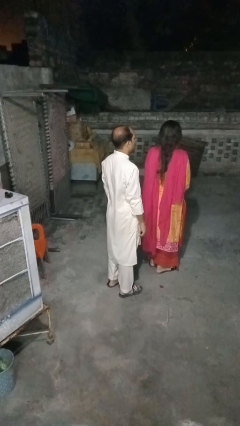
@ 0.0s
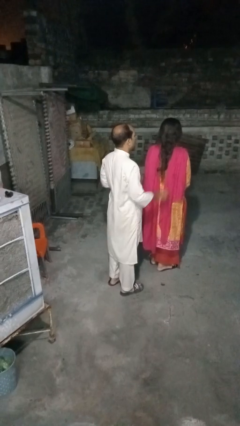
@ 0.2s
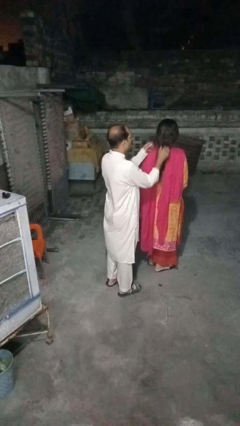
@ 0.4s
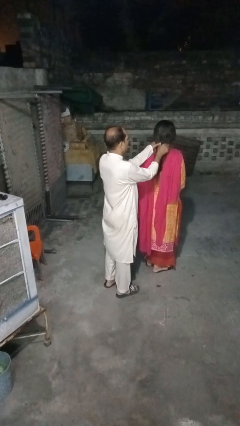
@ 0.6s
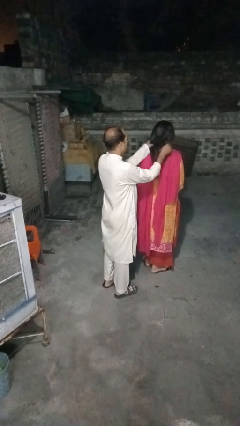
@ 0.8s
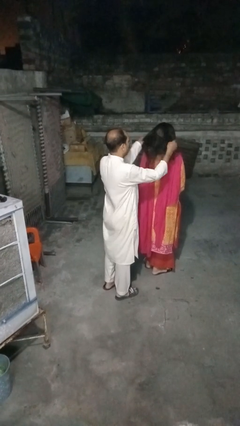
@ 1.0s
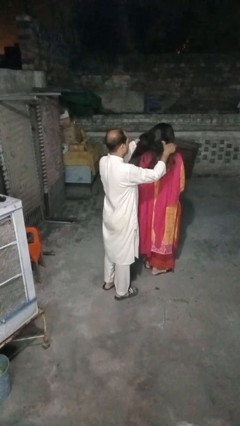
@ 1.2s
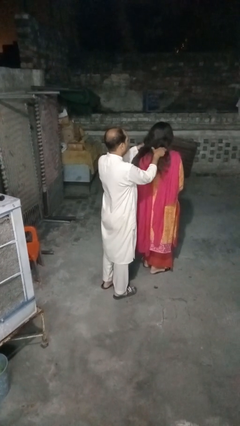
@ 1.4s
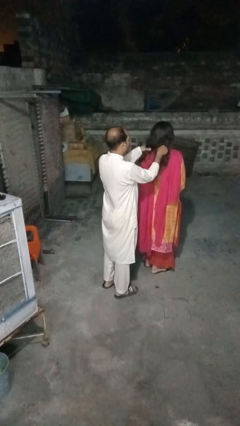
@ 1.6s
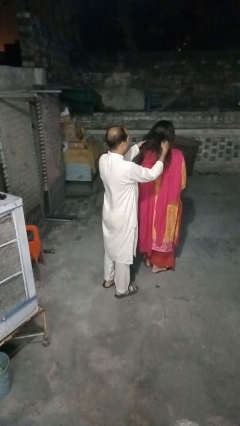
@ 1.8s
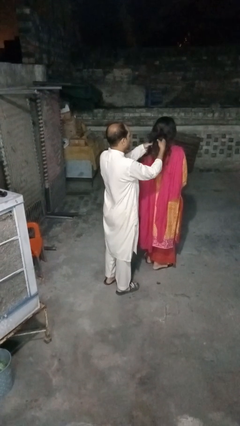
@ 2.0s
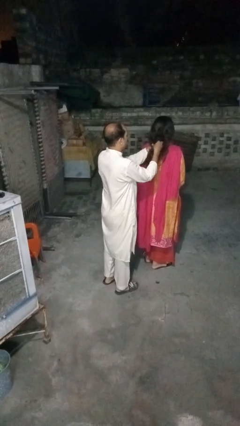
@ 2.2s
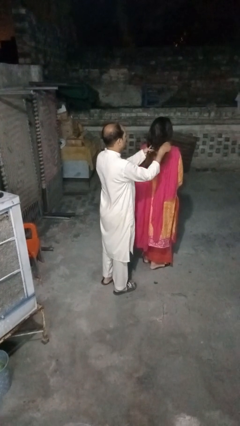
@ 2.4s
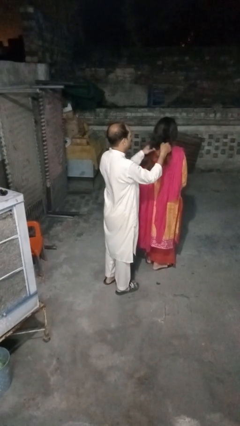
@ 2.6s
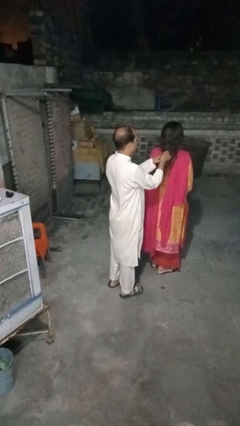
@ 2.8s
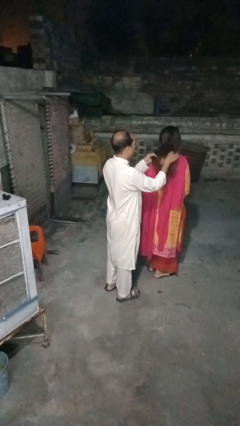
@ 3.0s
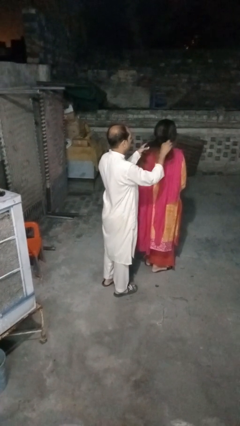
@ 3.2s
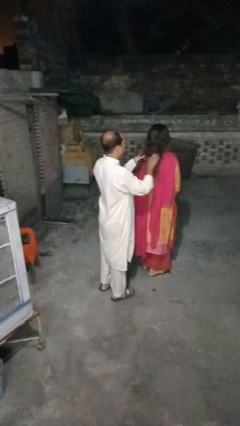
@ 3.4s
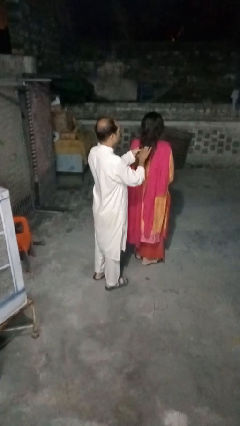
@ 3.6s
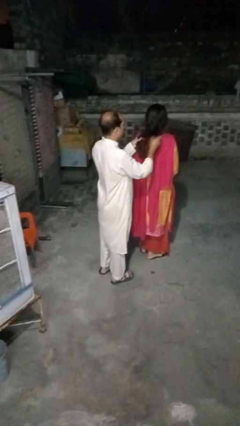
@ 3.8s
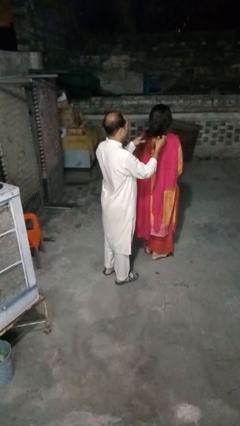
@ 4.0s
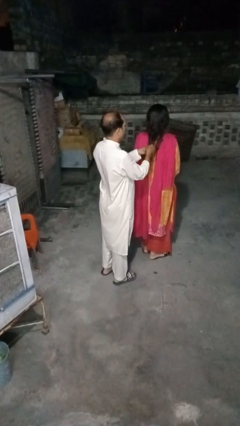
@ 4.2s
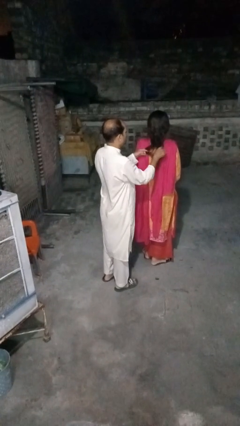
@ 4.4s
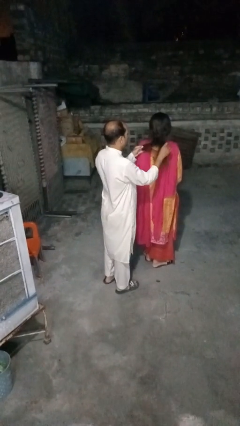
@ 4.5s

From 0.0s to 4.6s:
person braids hair of person

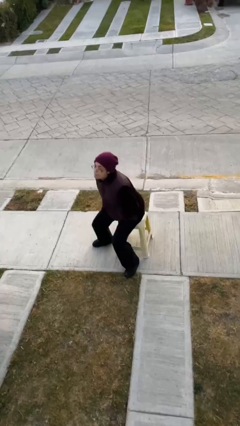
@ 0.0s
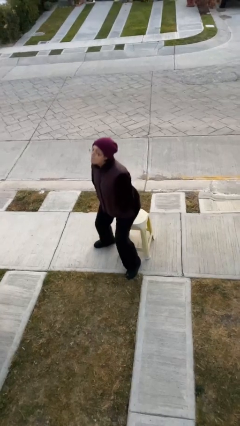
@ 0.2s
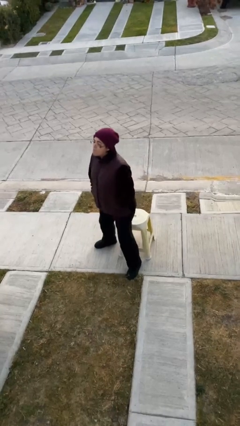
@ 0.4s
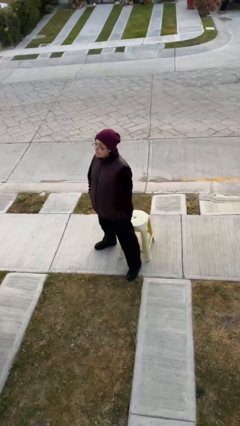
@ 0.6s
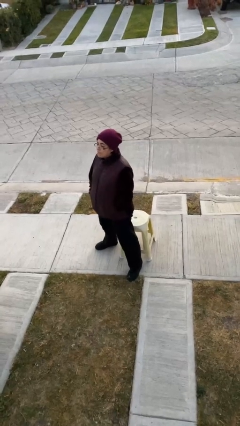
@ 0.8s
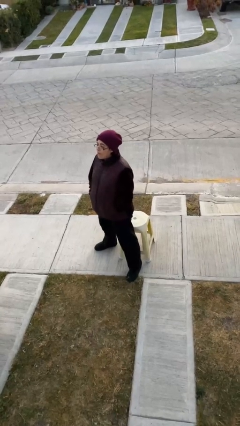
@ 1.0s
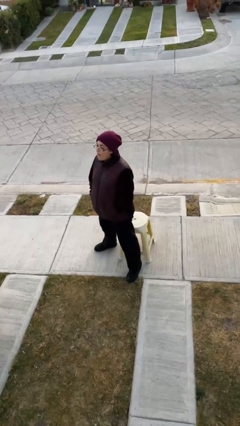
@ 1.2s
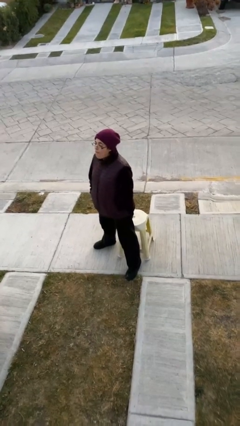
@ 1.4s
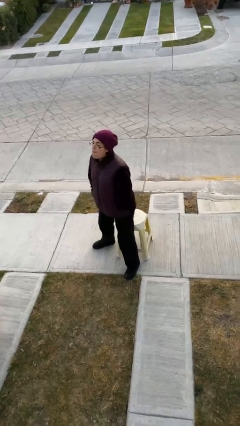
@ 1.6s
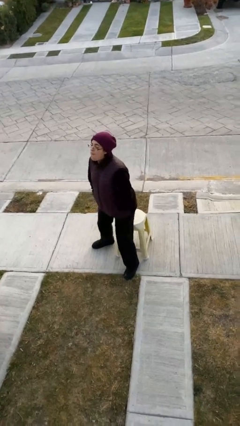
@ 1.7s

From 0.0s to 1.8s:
person stands up

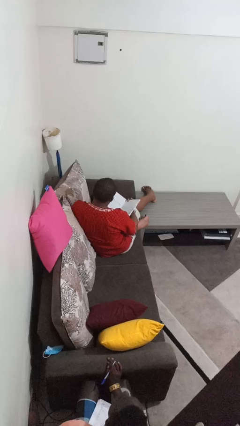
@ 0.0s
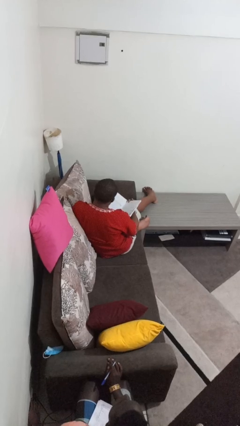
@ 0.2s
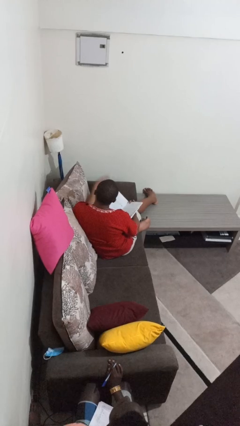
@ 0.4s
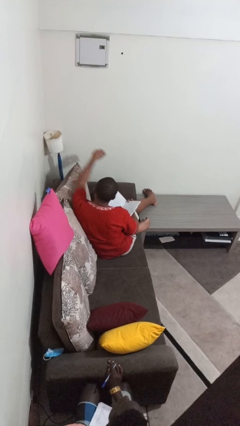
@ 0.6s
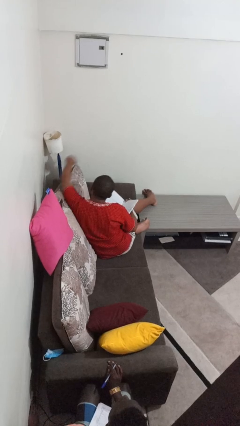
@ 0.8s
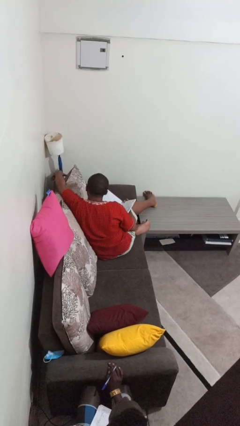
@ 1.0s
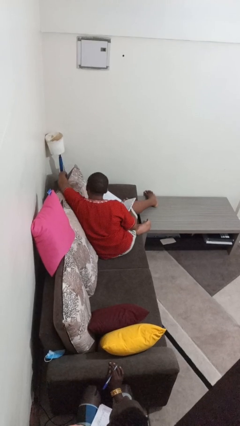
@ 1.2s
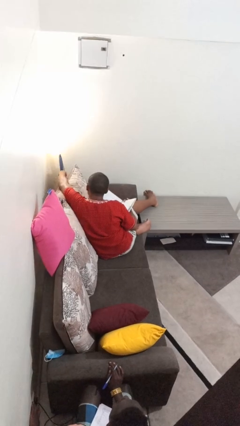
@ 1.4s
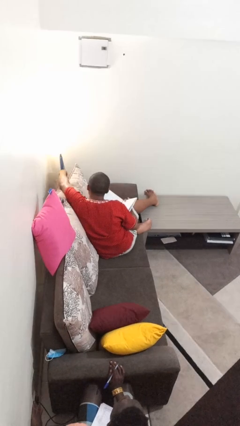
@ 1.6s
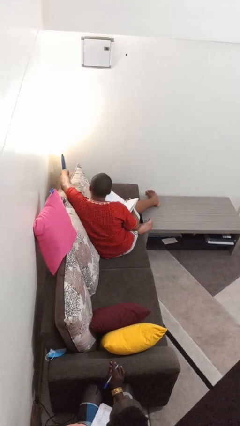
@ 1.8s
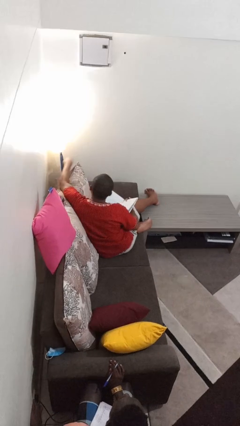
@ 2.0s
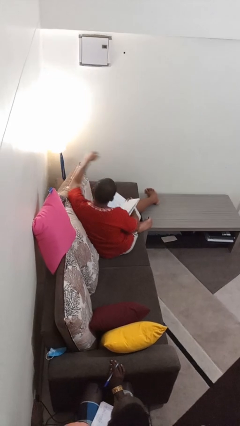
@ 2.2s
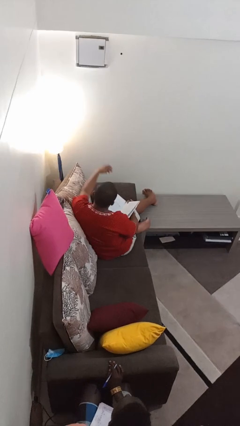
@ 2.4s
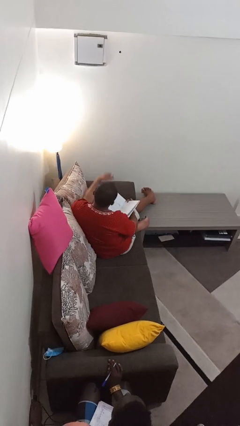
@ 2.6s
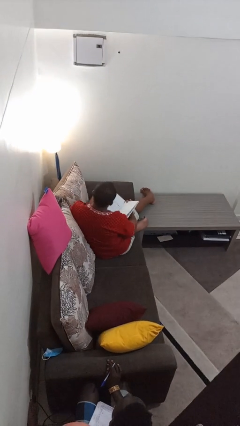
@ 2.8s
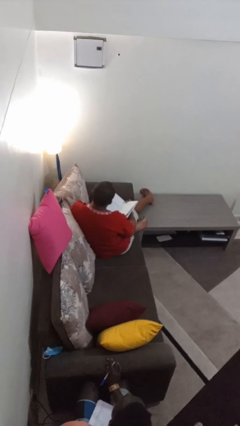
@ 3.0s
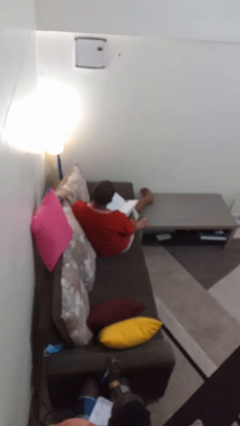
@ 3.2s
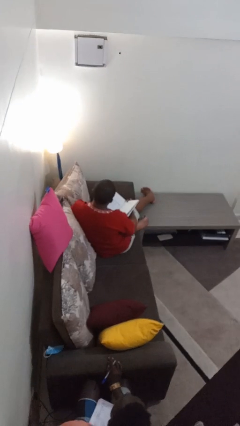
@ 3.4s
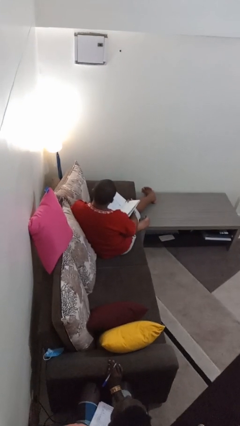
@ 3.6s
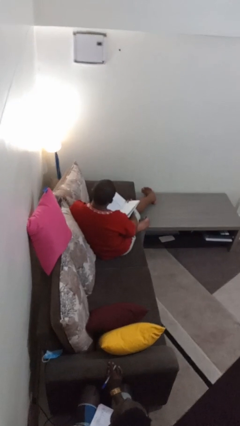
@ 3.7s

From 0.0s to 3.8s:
person turns on lamp

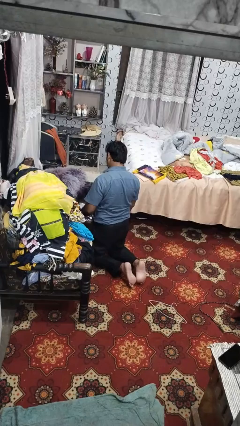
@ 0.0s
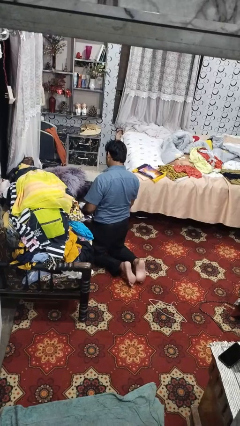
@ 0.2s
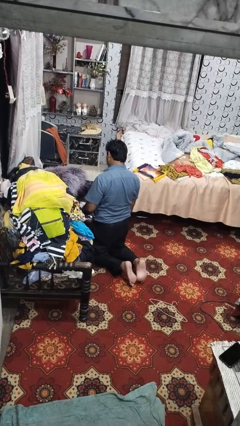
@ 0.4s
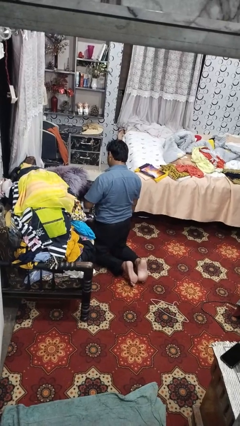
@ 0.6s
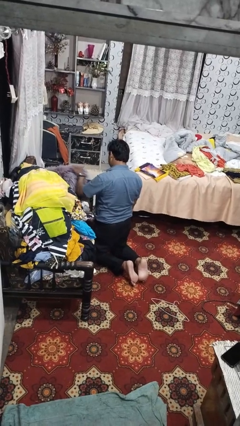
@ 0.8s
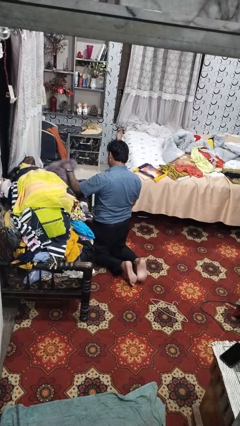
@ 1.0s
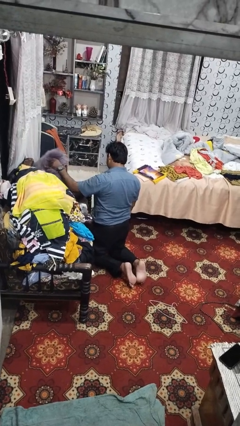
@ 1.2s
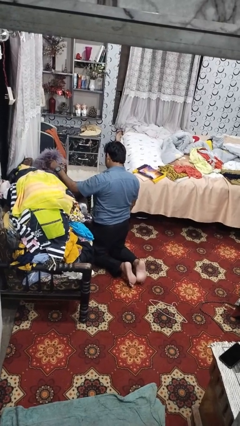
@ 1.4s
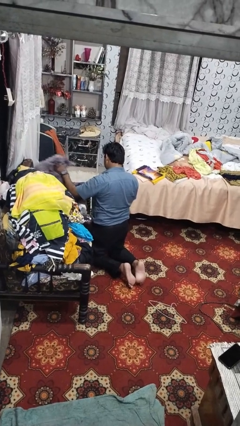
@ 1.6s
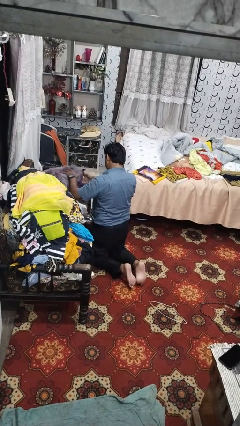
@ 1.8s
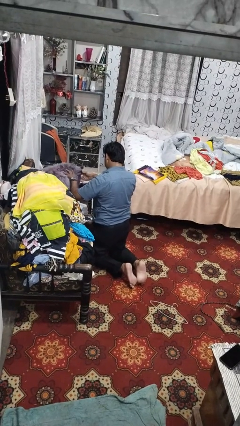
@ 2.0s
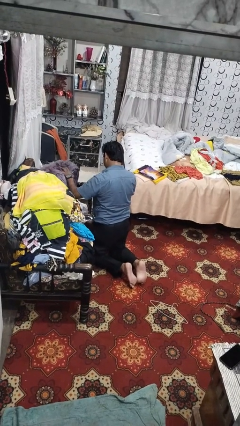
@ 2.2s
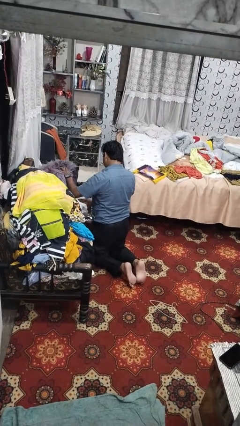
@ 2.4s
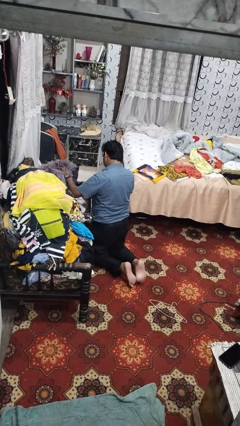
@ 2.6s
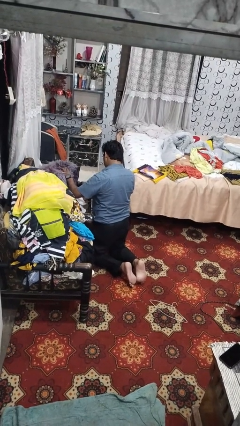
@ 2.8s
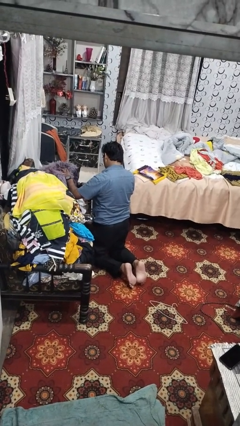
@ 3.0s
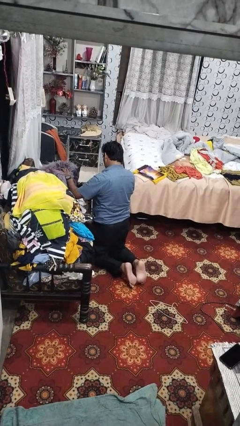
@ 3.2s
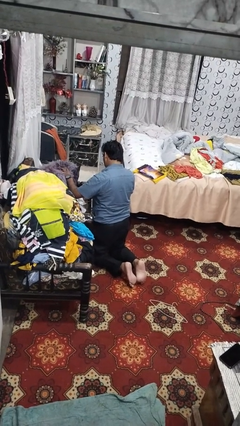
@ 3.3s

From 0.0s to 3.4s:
person searches in couch

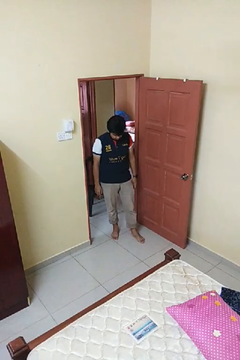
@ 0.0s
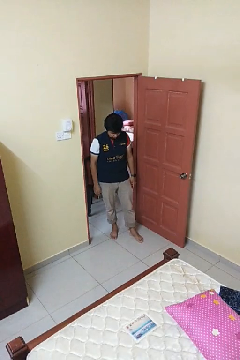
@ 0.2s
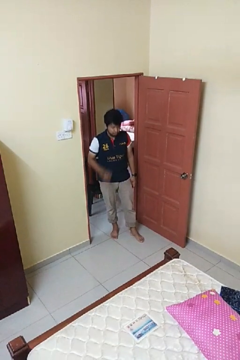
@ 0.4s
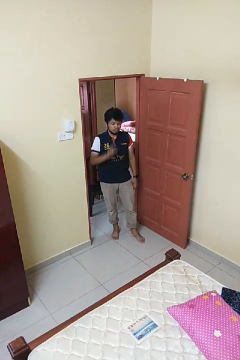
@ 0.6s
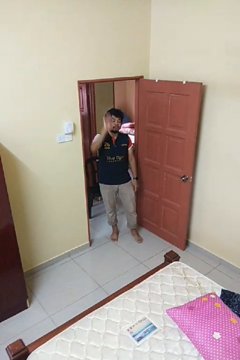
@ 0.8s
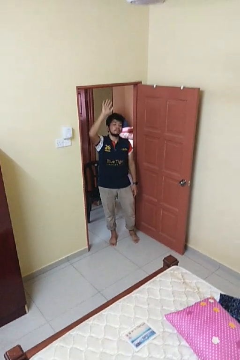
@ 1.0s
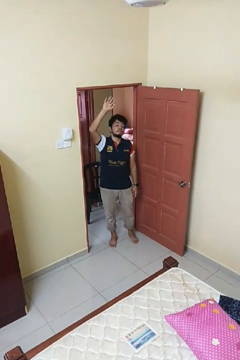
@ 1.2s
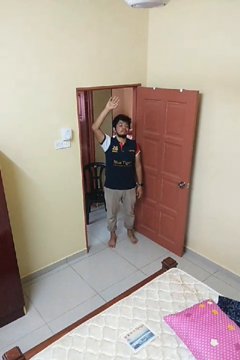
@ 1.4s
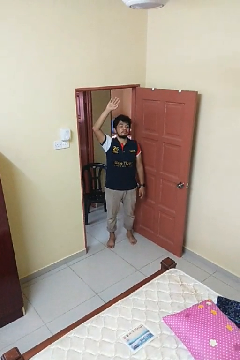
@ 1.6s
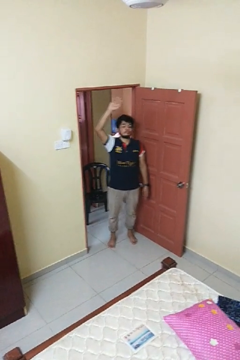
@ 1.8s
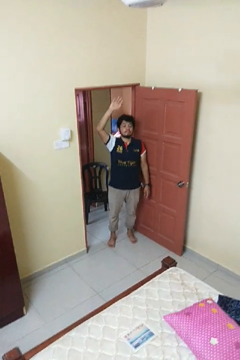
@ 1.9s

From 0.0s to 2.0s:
person gestures raise hand

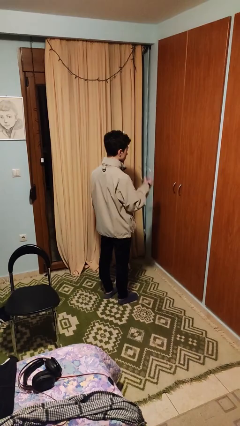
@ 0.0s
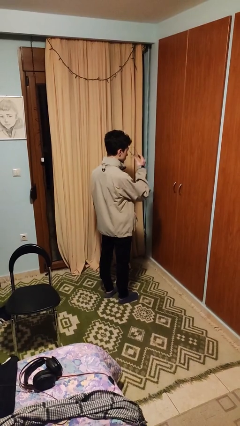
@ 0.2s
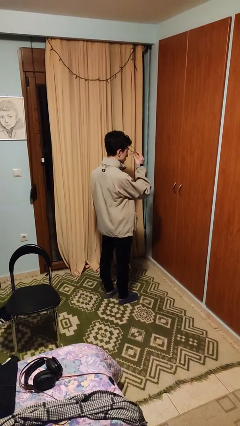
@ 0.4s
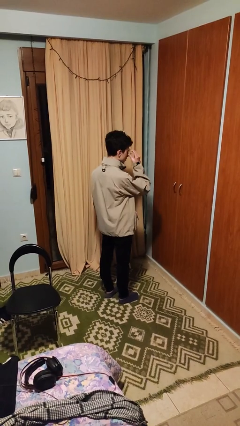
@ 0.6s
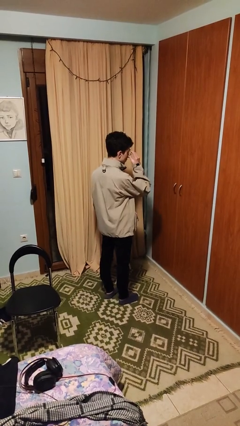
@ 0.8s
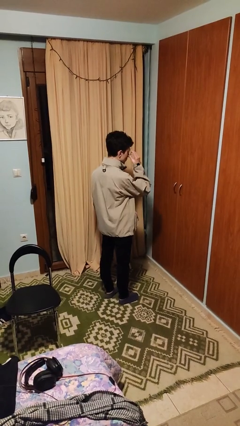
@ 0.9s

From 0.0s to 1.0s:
person puts on glasses

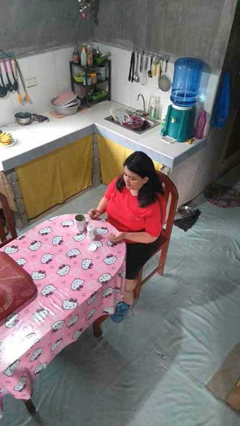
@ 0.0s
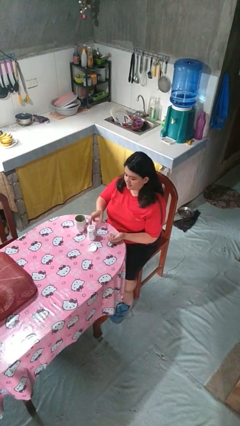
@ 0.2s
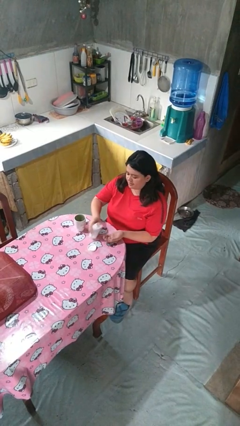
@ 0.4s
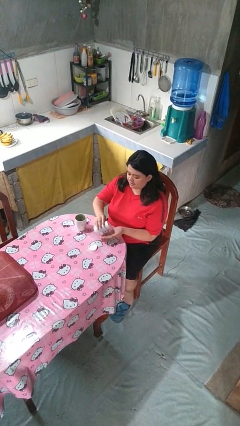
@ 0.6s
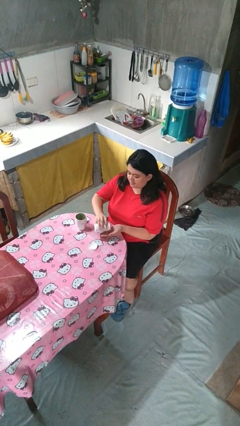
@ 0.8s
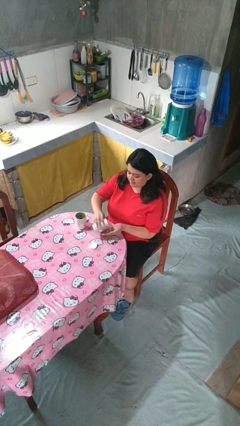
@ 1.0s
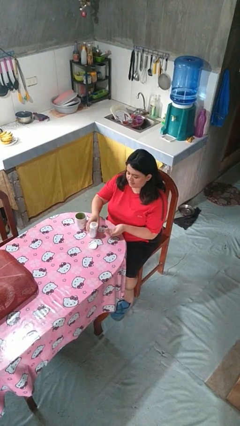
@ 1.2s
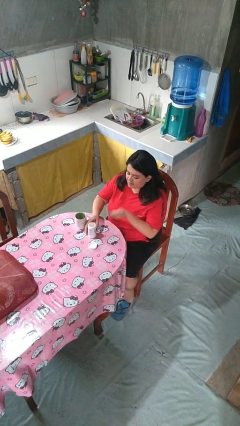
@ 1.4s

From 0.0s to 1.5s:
person takes medicine pills
